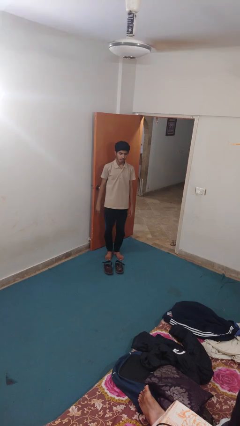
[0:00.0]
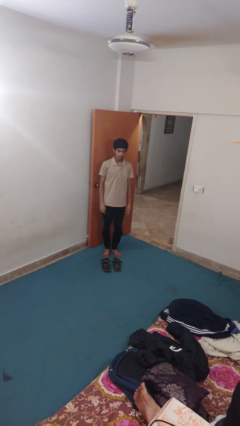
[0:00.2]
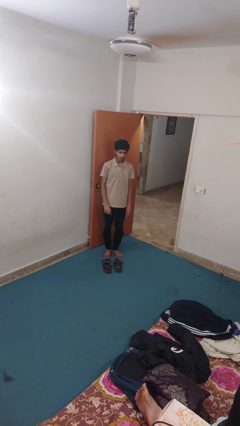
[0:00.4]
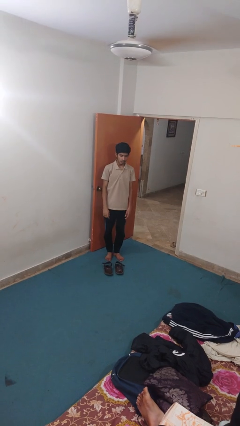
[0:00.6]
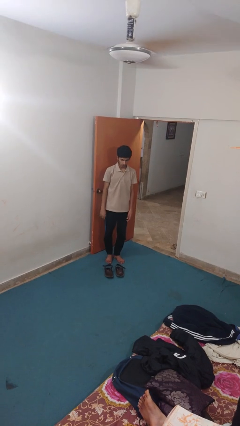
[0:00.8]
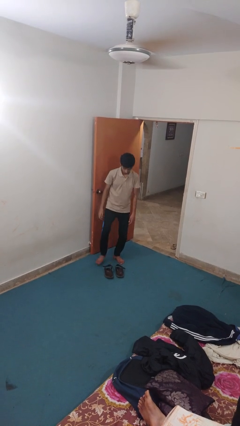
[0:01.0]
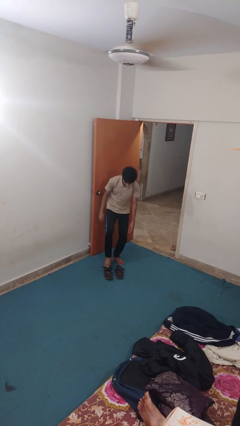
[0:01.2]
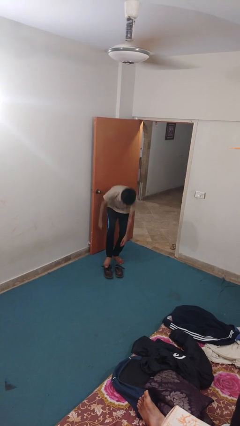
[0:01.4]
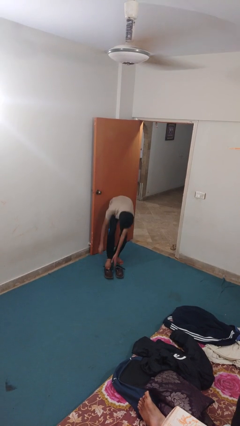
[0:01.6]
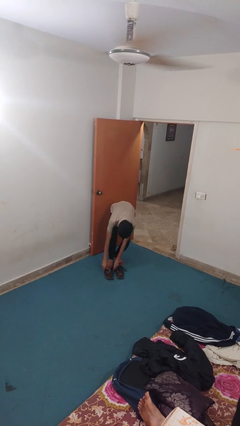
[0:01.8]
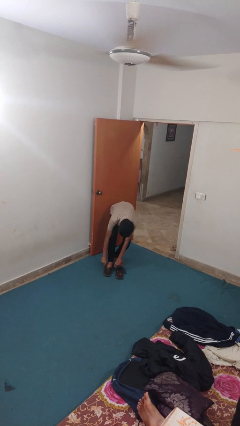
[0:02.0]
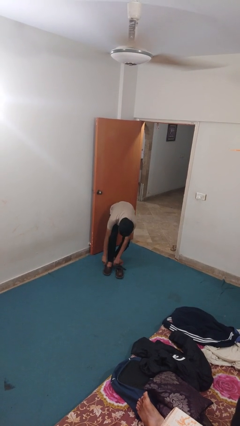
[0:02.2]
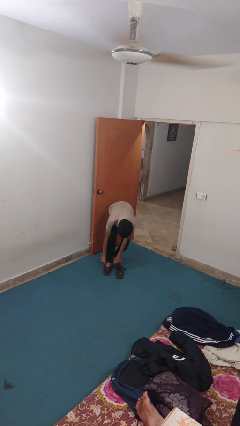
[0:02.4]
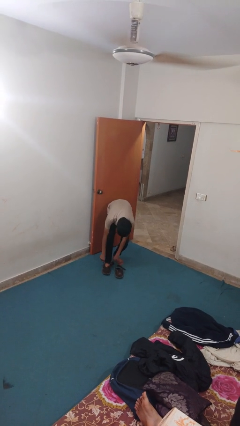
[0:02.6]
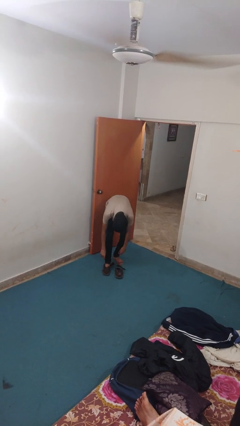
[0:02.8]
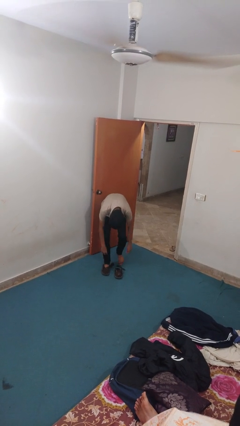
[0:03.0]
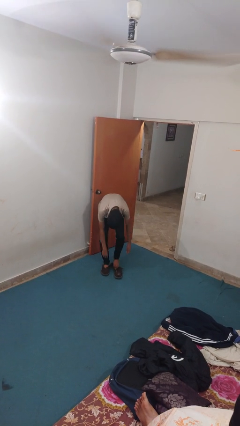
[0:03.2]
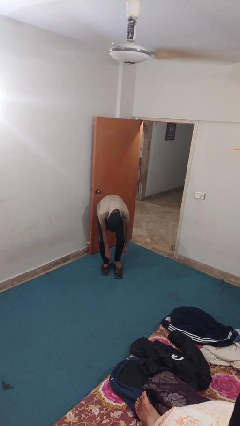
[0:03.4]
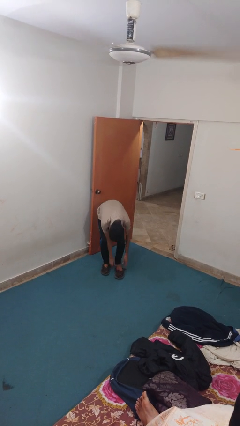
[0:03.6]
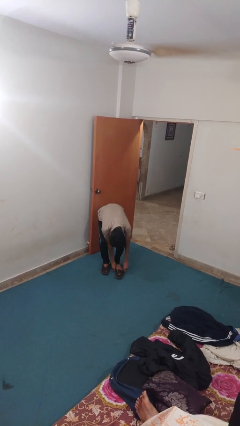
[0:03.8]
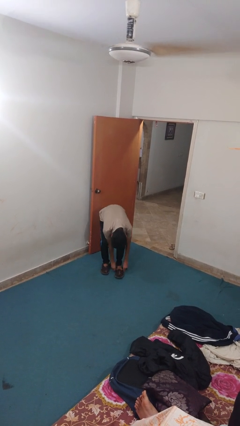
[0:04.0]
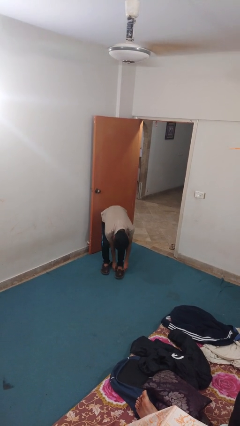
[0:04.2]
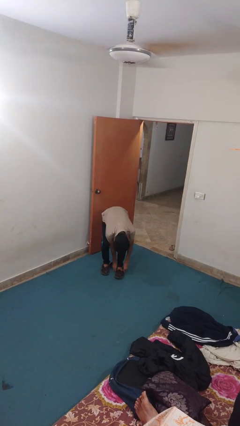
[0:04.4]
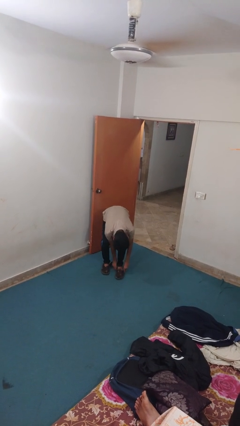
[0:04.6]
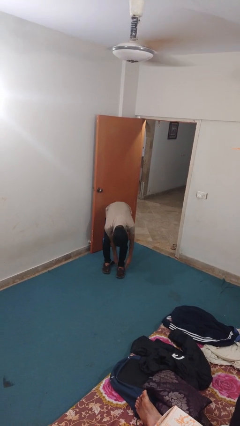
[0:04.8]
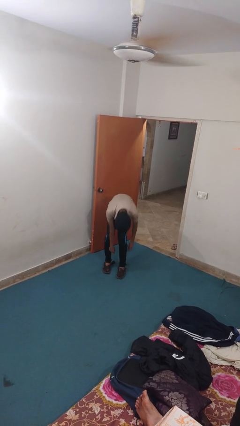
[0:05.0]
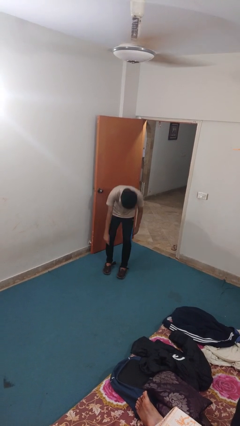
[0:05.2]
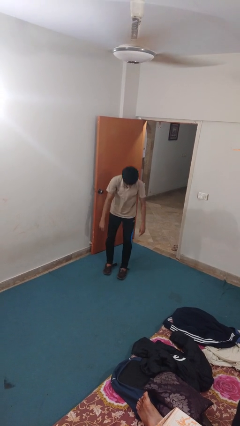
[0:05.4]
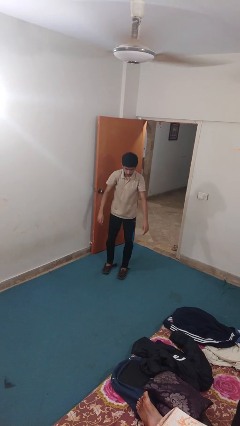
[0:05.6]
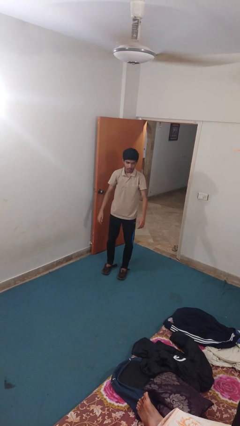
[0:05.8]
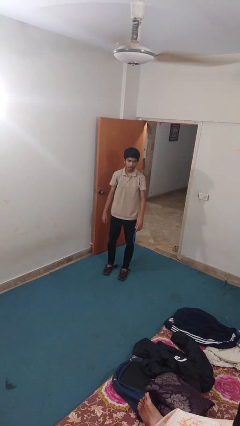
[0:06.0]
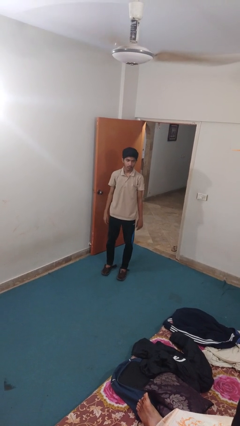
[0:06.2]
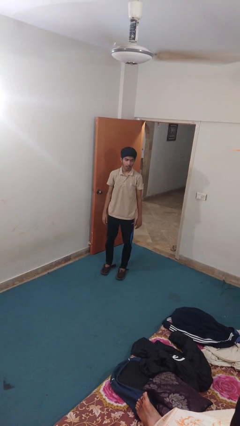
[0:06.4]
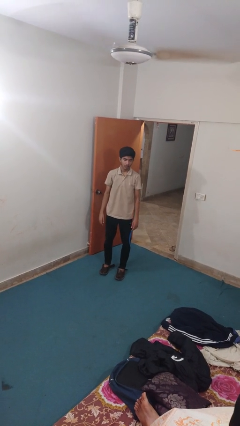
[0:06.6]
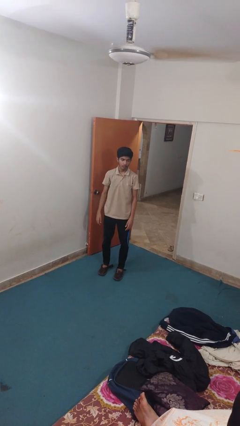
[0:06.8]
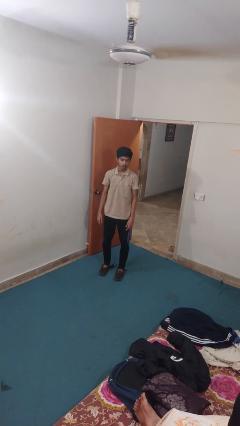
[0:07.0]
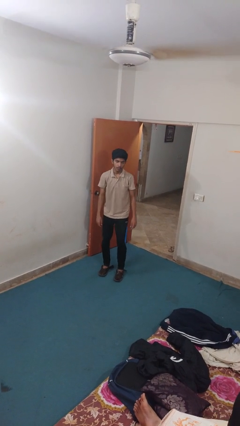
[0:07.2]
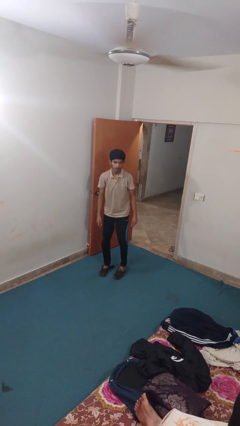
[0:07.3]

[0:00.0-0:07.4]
person puts on shoes

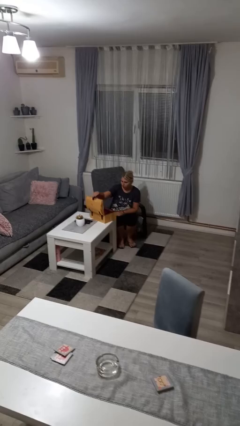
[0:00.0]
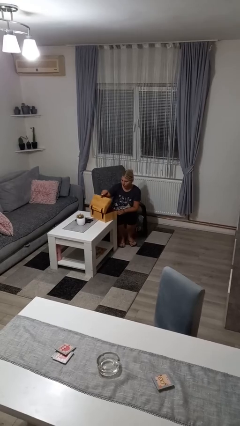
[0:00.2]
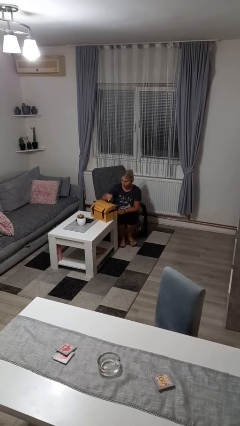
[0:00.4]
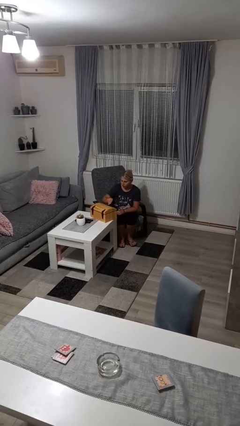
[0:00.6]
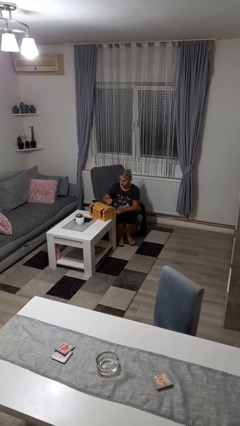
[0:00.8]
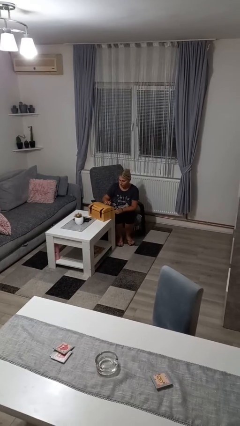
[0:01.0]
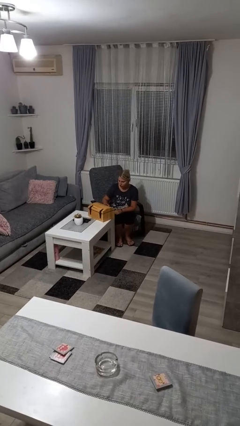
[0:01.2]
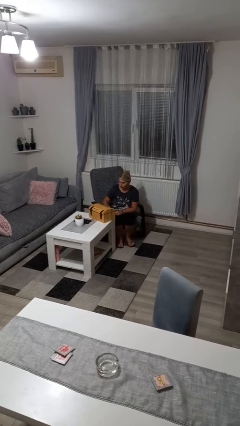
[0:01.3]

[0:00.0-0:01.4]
person closes jewelry box

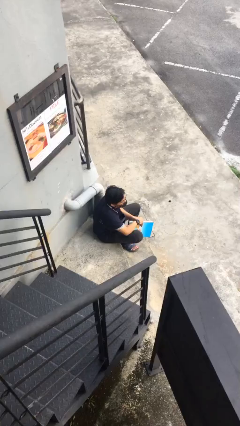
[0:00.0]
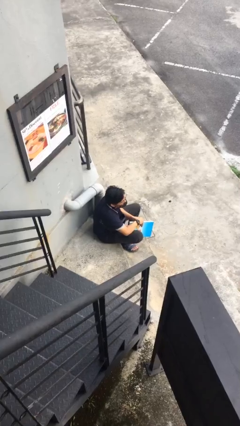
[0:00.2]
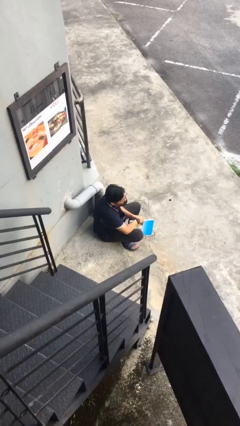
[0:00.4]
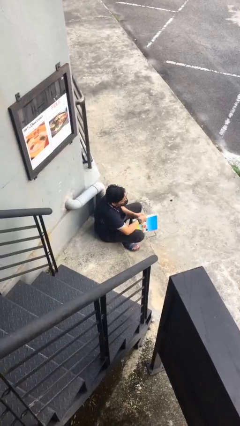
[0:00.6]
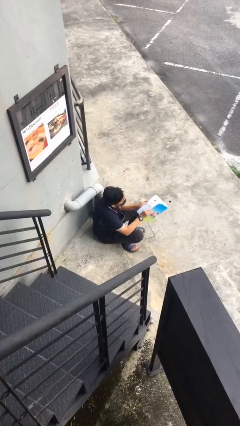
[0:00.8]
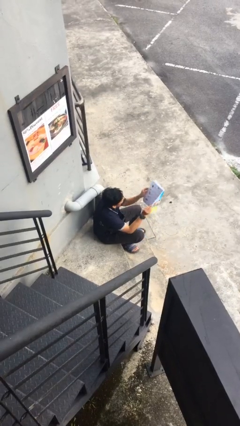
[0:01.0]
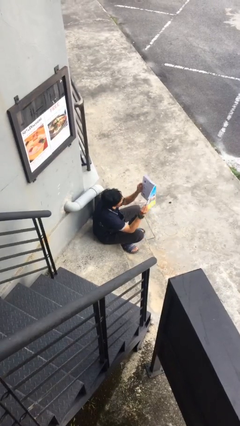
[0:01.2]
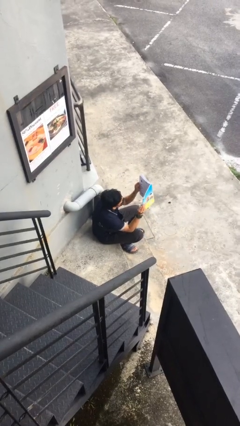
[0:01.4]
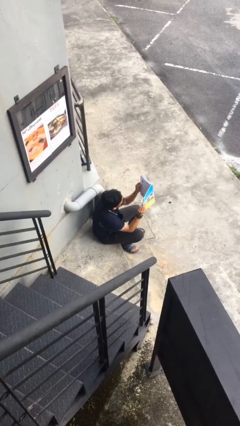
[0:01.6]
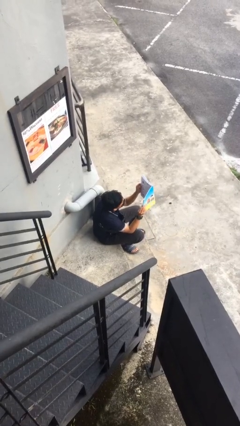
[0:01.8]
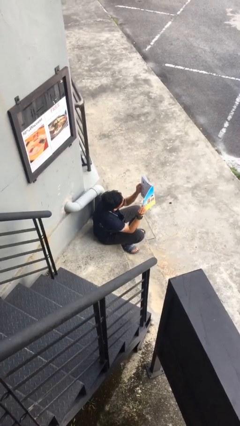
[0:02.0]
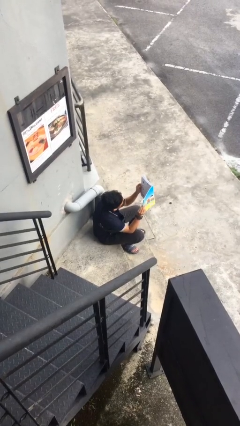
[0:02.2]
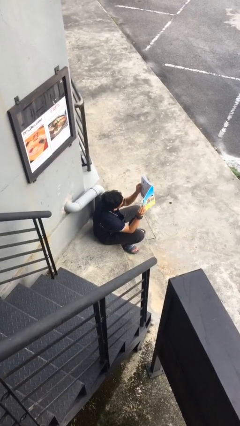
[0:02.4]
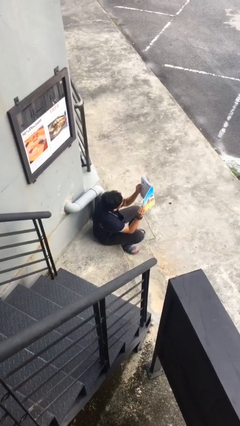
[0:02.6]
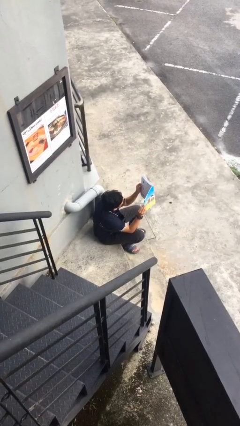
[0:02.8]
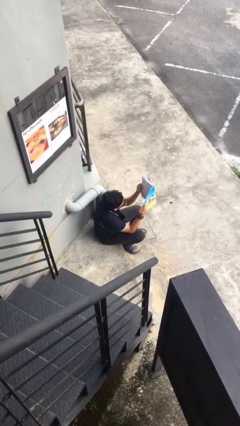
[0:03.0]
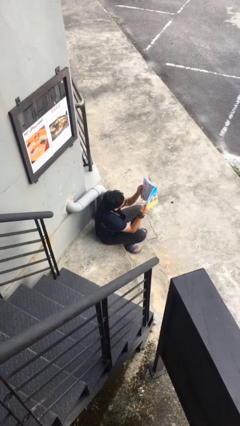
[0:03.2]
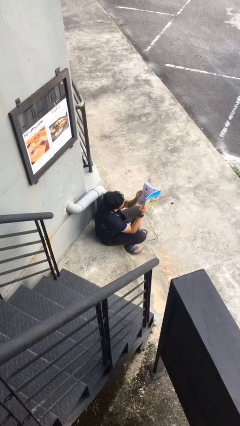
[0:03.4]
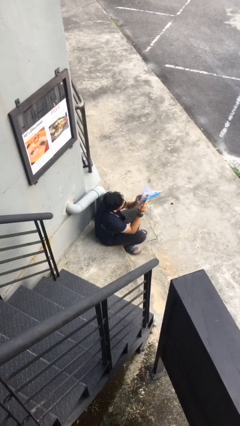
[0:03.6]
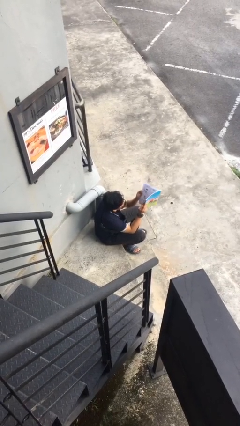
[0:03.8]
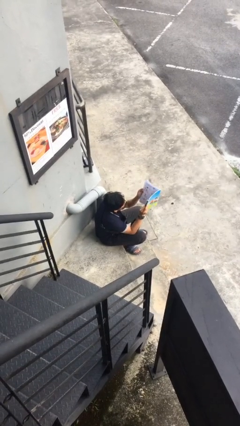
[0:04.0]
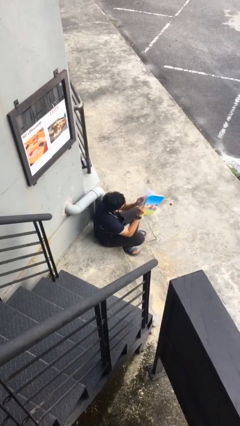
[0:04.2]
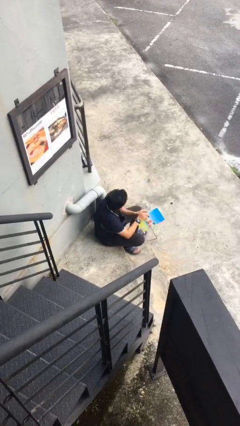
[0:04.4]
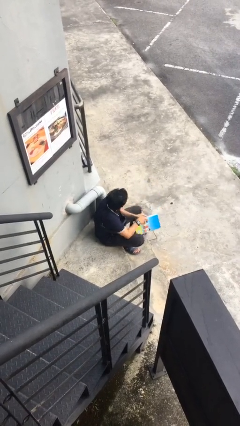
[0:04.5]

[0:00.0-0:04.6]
person reads document

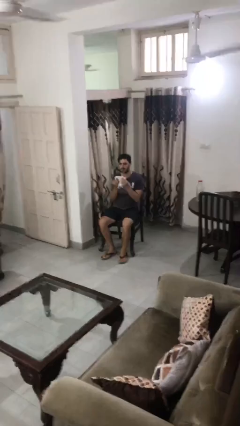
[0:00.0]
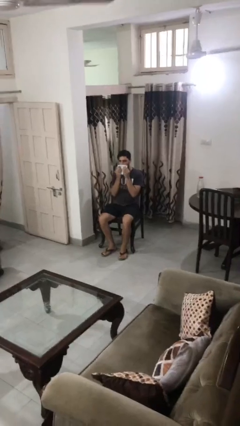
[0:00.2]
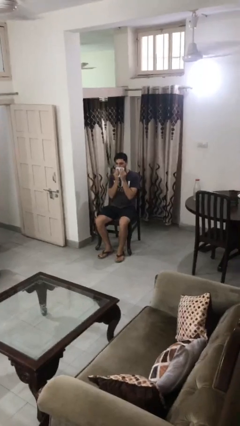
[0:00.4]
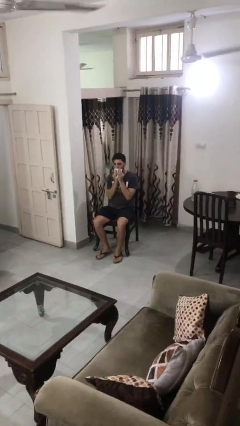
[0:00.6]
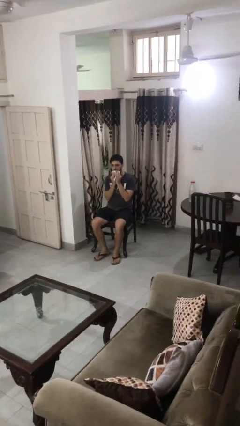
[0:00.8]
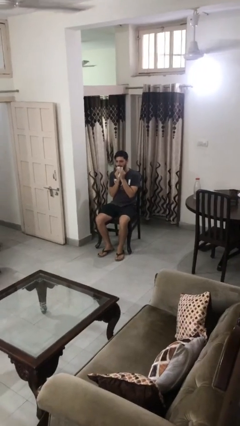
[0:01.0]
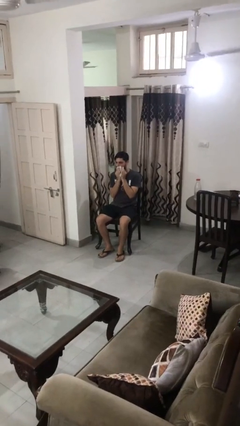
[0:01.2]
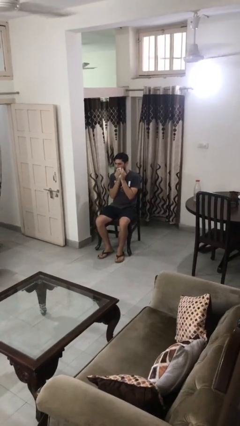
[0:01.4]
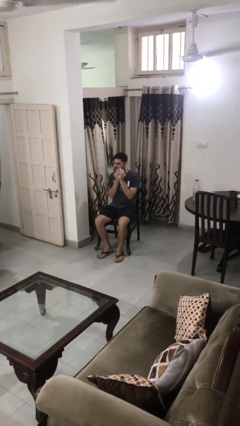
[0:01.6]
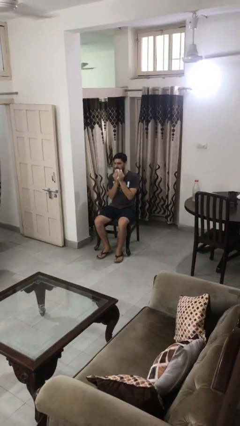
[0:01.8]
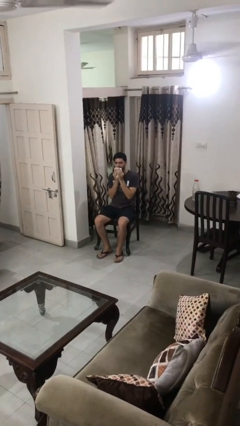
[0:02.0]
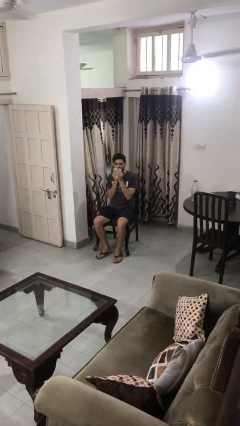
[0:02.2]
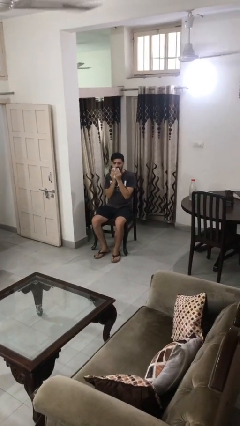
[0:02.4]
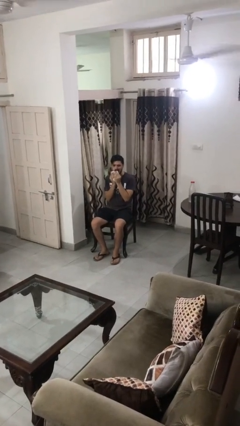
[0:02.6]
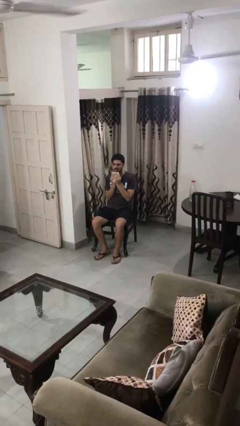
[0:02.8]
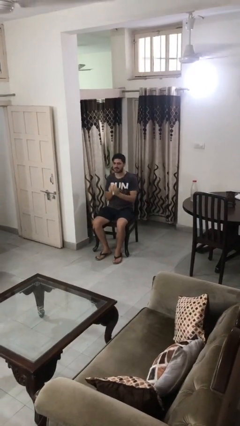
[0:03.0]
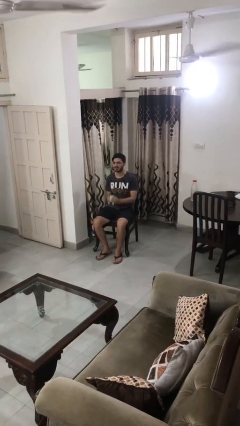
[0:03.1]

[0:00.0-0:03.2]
person wipes mouth with napkin

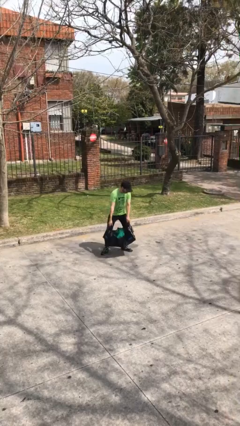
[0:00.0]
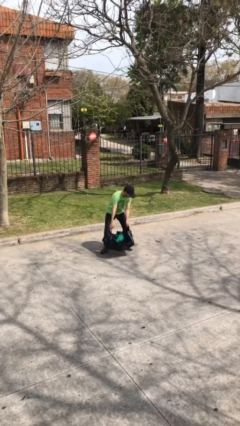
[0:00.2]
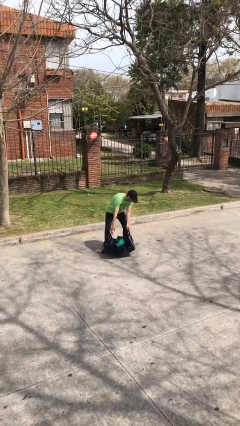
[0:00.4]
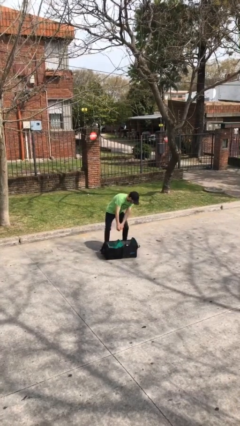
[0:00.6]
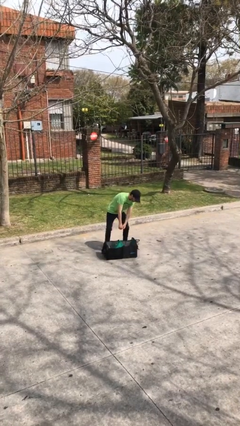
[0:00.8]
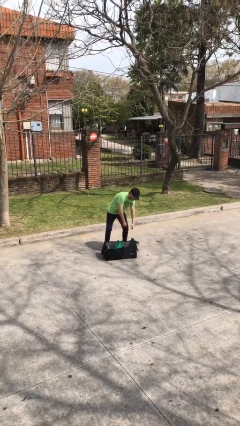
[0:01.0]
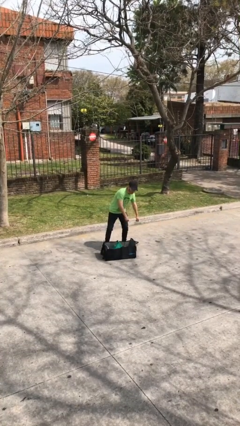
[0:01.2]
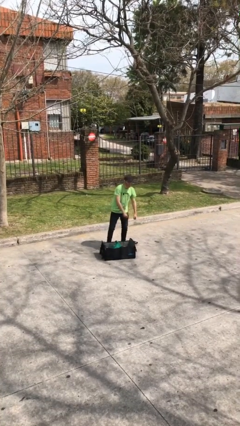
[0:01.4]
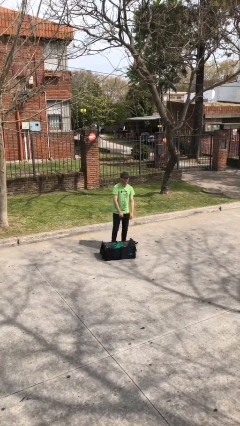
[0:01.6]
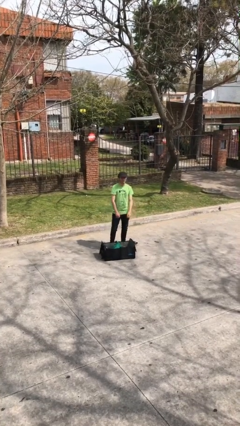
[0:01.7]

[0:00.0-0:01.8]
person puts down object on floor
